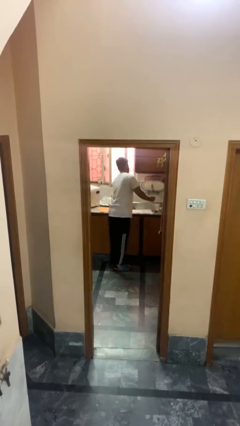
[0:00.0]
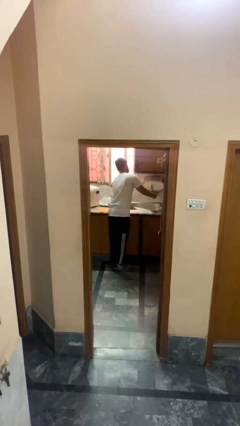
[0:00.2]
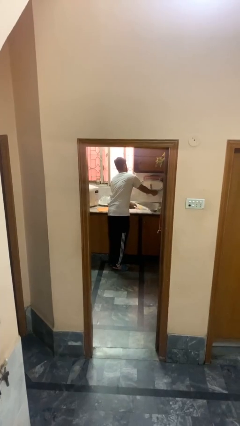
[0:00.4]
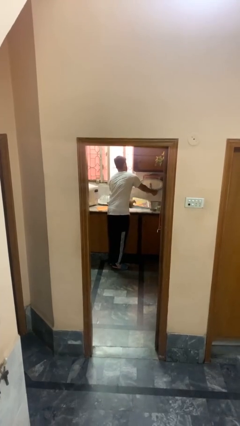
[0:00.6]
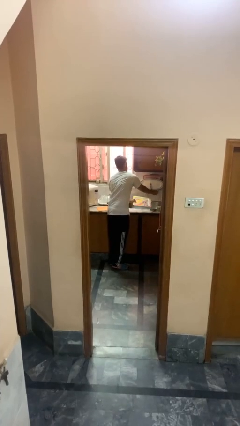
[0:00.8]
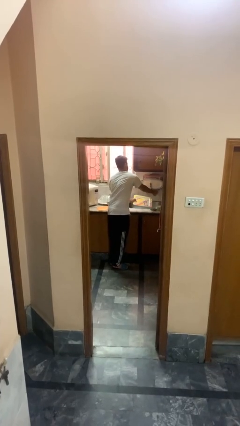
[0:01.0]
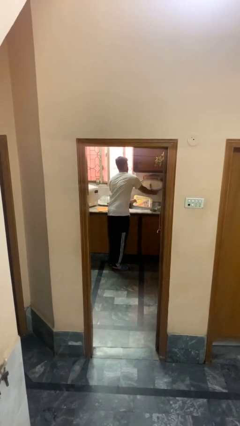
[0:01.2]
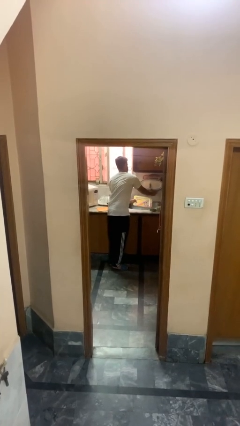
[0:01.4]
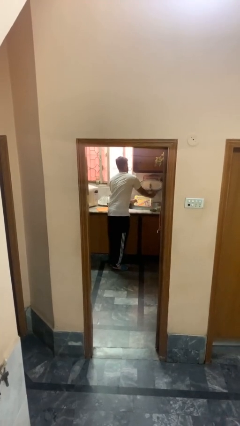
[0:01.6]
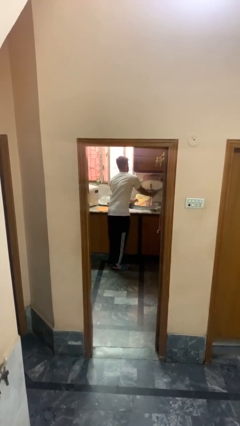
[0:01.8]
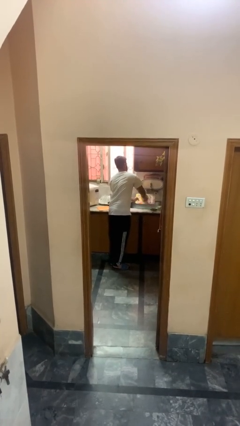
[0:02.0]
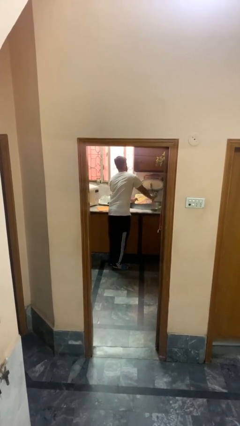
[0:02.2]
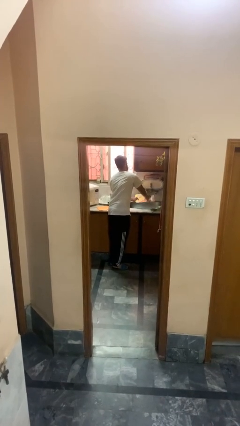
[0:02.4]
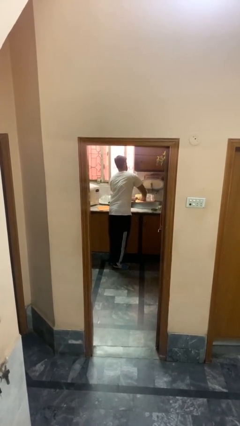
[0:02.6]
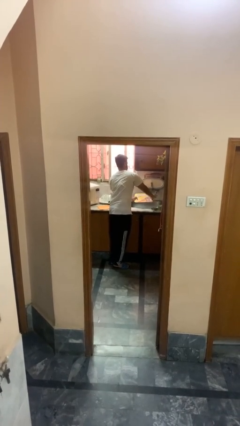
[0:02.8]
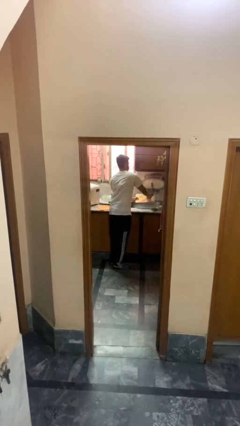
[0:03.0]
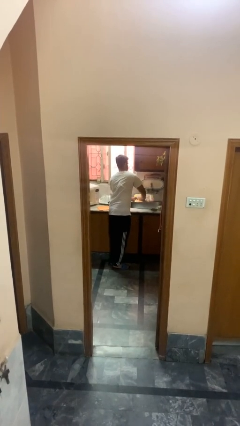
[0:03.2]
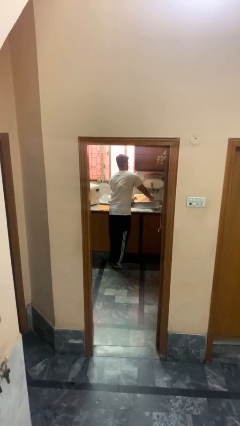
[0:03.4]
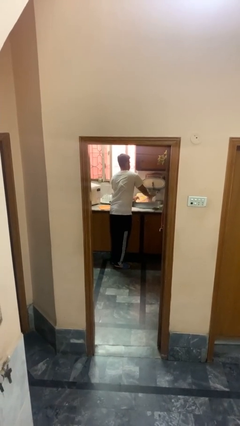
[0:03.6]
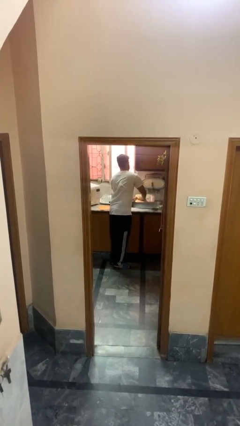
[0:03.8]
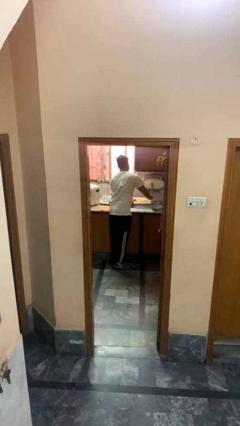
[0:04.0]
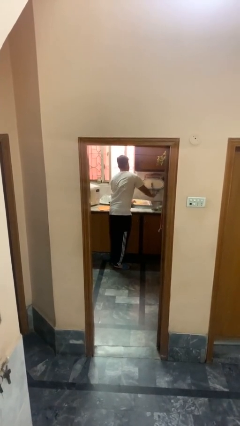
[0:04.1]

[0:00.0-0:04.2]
person washes dish

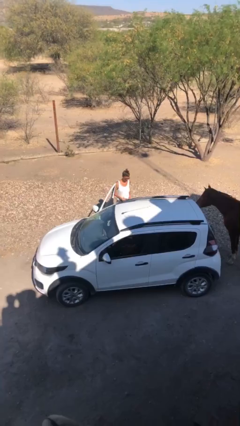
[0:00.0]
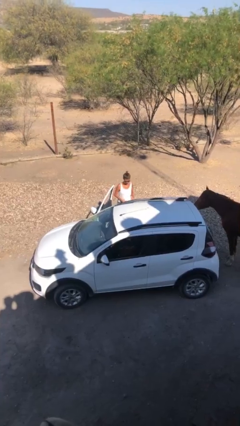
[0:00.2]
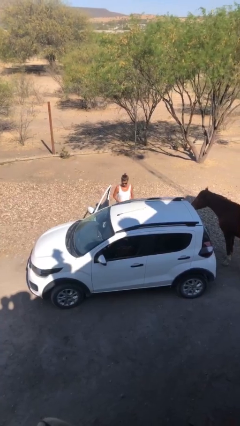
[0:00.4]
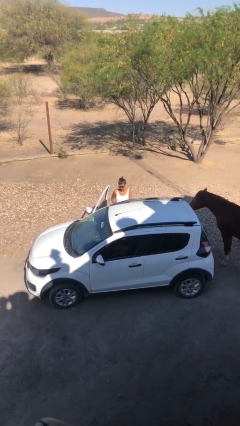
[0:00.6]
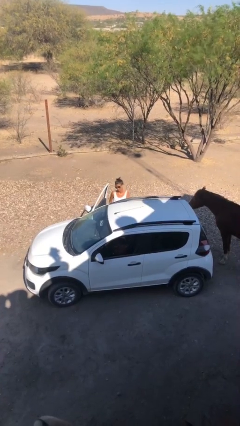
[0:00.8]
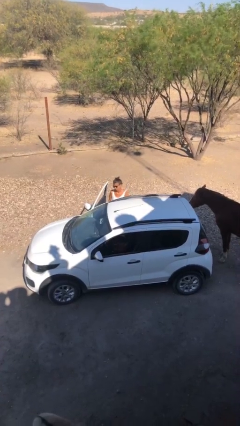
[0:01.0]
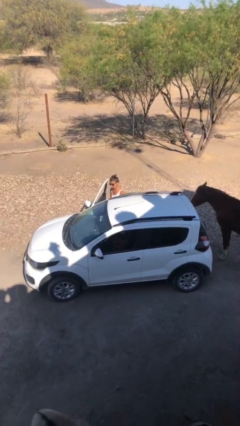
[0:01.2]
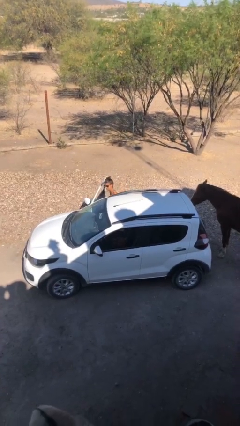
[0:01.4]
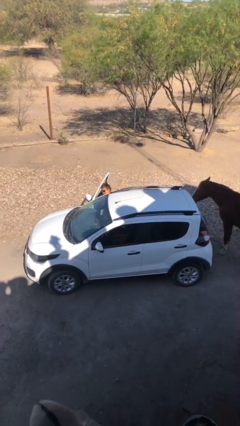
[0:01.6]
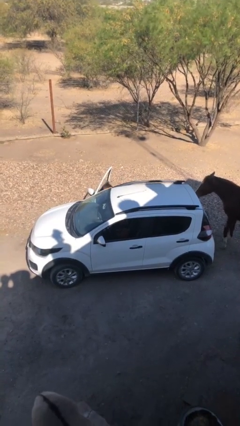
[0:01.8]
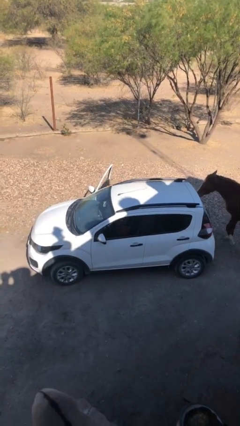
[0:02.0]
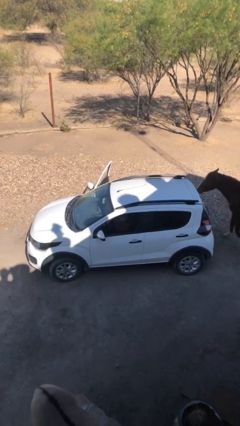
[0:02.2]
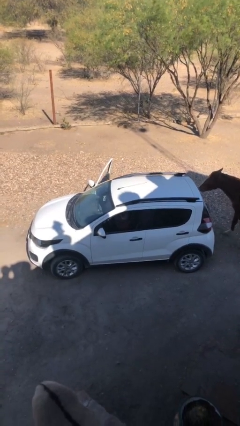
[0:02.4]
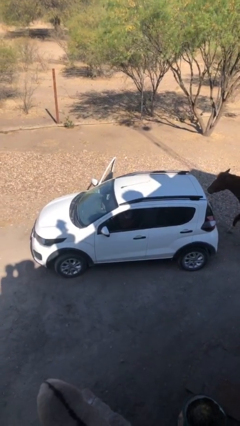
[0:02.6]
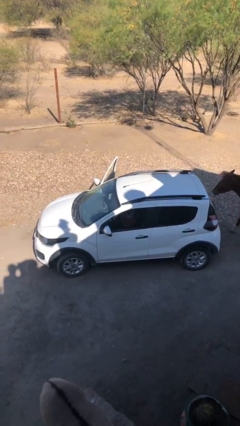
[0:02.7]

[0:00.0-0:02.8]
person enters car

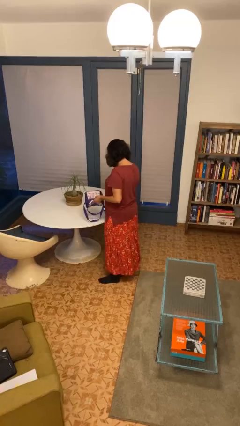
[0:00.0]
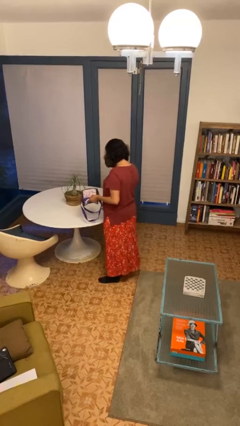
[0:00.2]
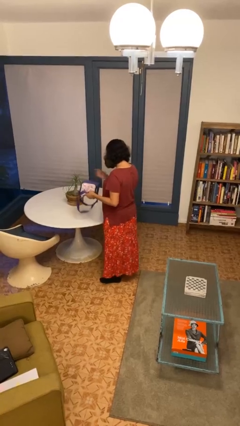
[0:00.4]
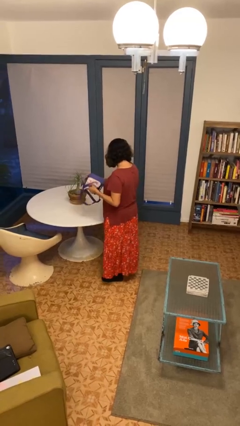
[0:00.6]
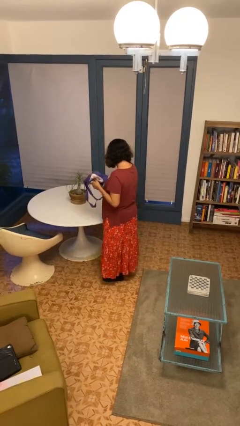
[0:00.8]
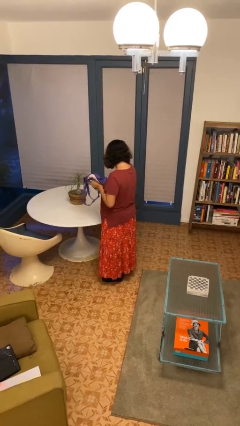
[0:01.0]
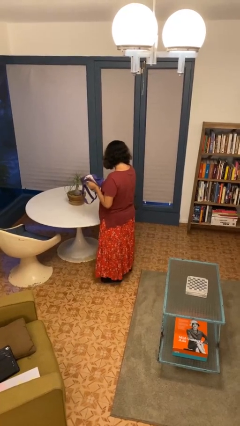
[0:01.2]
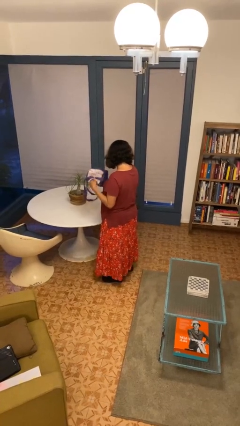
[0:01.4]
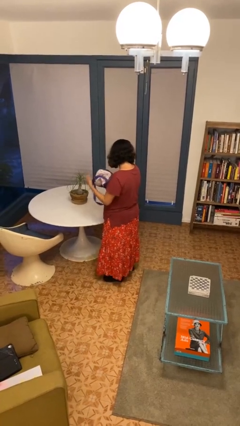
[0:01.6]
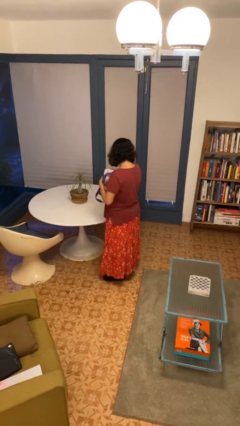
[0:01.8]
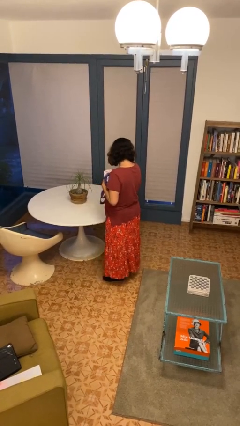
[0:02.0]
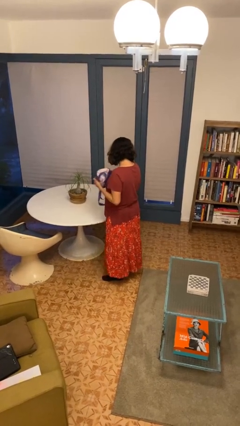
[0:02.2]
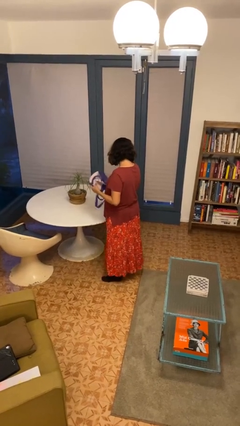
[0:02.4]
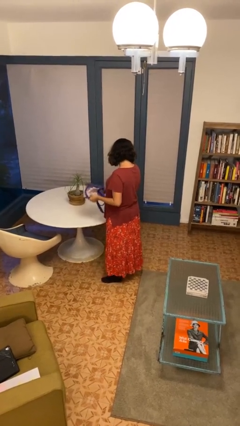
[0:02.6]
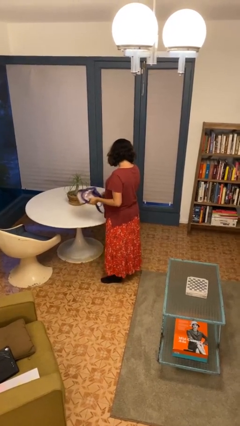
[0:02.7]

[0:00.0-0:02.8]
person squeezes object

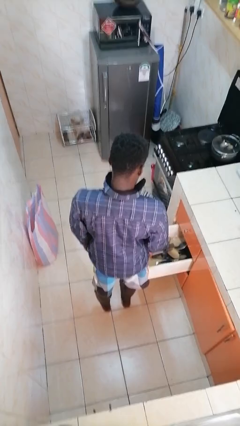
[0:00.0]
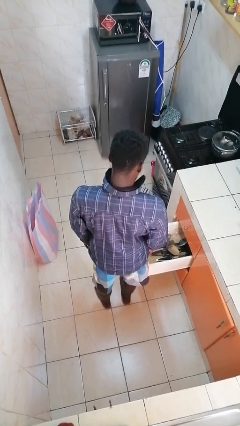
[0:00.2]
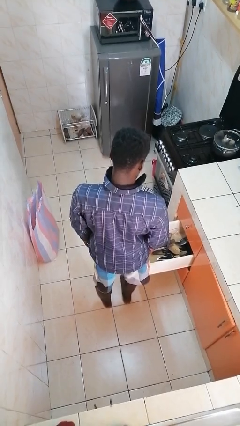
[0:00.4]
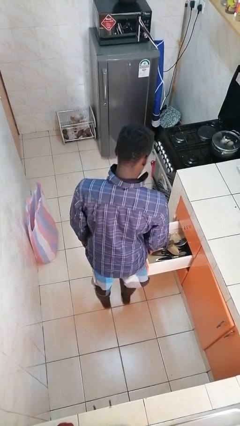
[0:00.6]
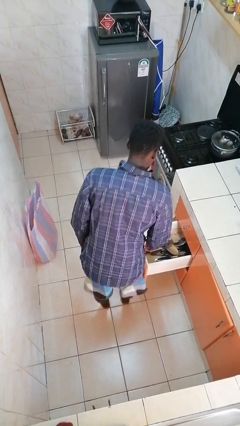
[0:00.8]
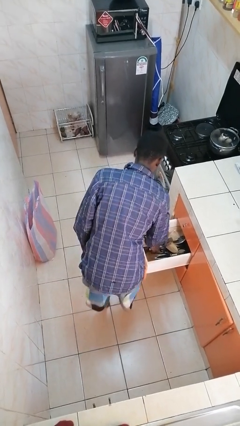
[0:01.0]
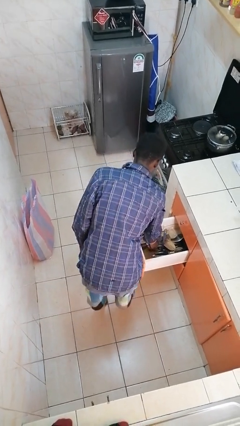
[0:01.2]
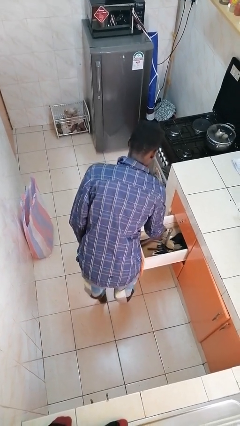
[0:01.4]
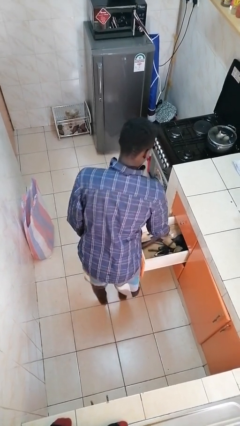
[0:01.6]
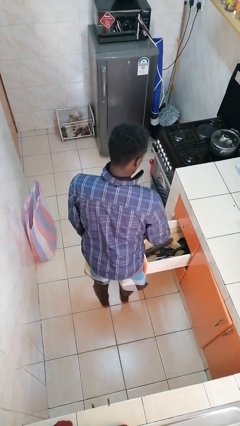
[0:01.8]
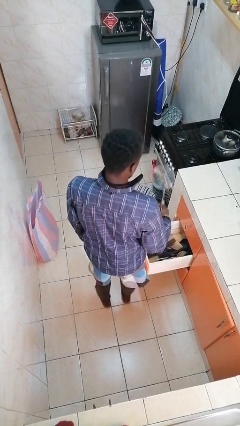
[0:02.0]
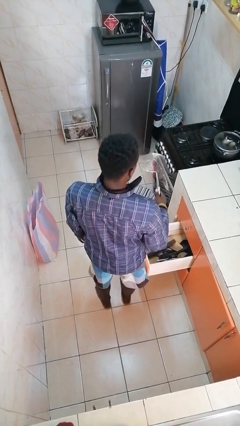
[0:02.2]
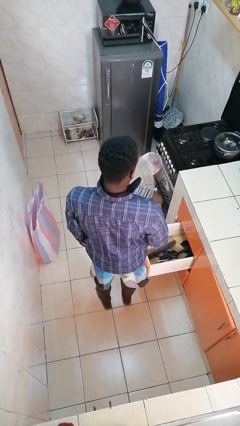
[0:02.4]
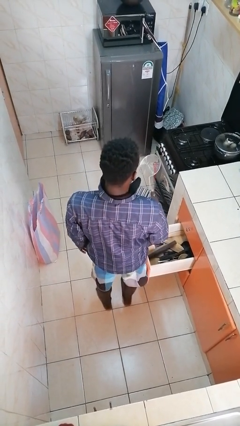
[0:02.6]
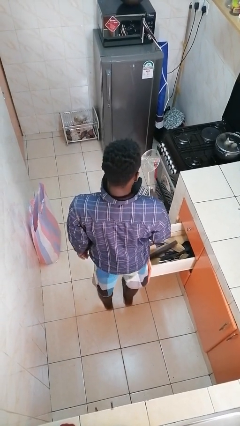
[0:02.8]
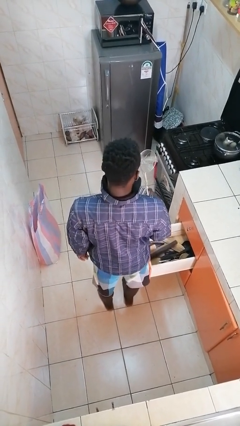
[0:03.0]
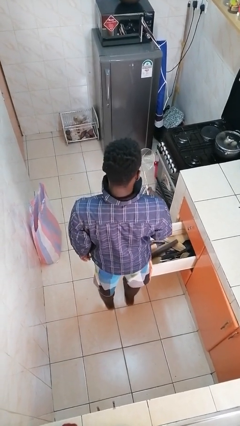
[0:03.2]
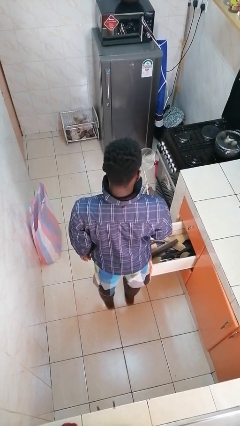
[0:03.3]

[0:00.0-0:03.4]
person takes object from kitchen drawer

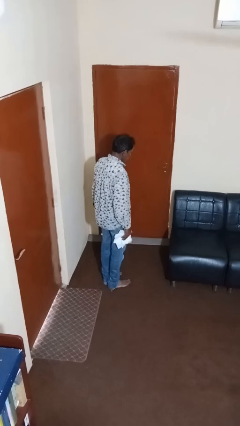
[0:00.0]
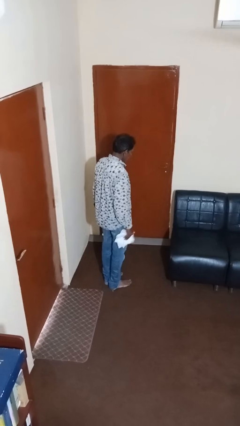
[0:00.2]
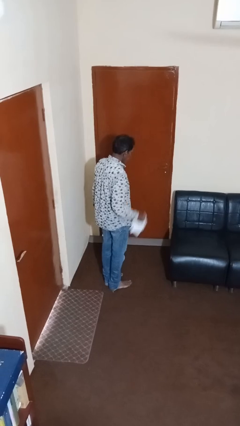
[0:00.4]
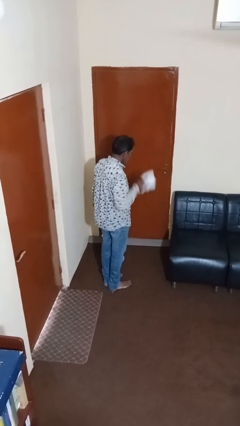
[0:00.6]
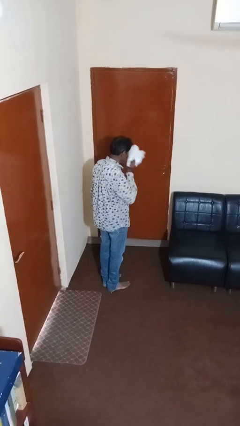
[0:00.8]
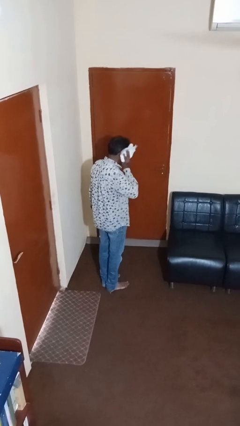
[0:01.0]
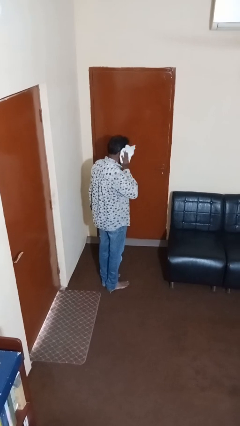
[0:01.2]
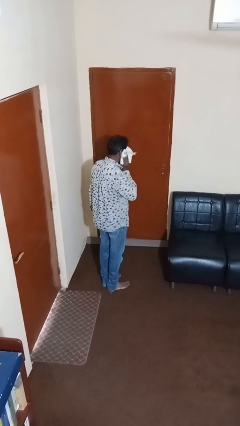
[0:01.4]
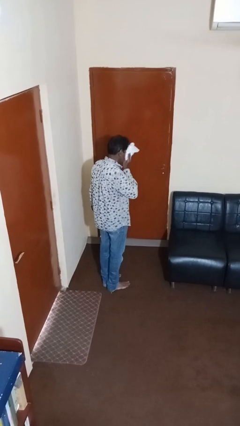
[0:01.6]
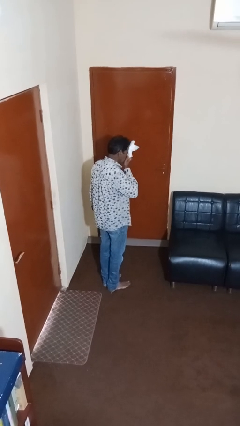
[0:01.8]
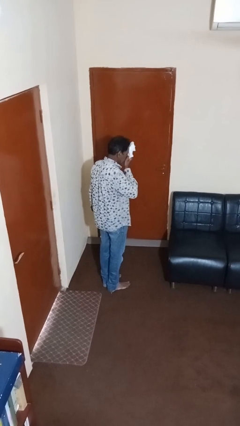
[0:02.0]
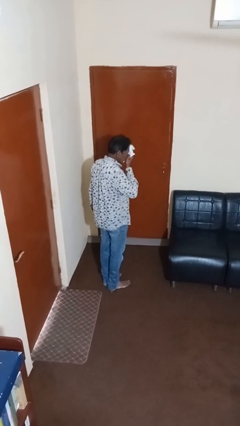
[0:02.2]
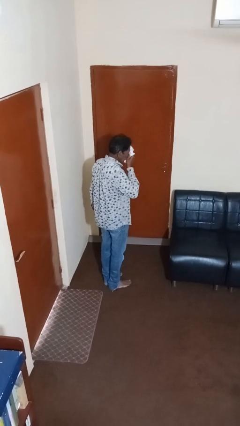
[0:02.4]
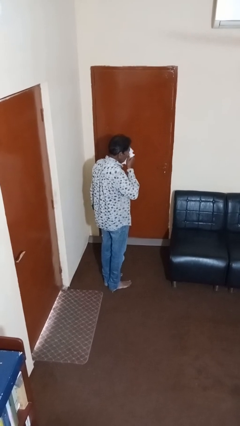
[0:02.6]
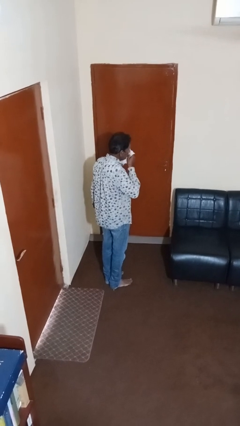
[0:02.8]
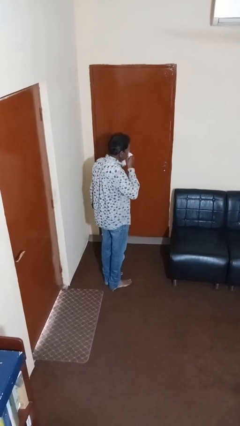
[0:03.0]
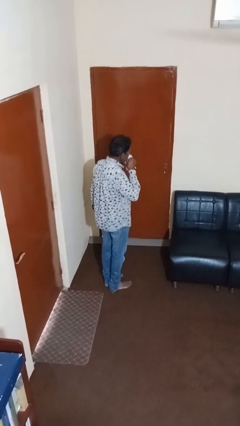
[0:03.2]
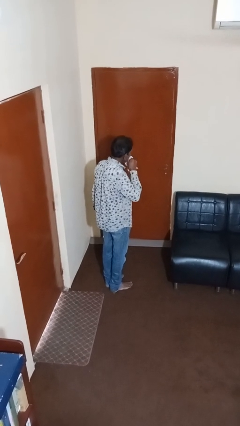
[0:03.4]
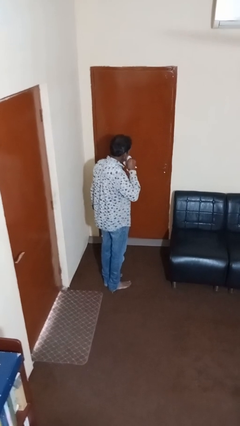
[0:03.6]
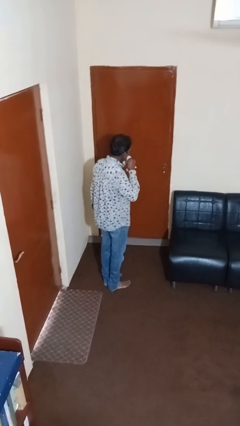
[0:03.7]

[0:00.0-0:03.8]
person wipes mouth with napkin

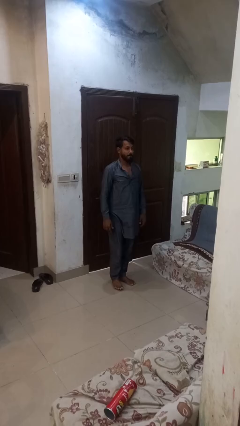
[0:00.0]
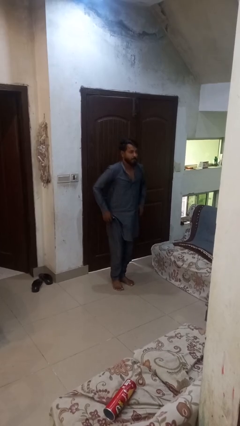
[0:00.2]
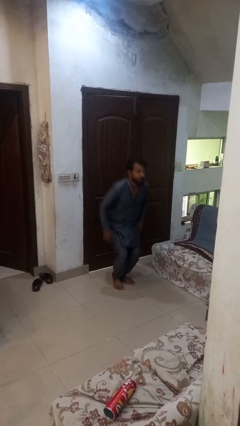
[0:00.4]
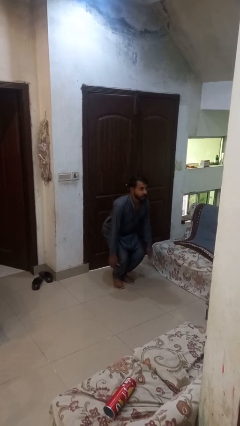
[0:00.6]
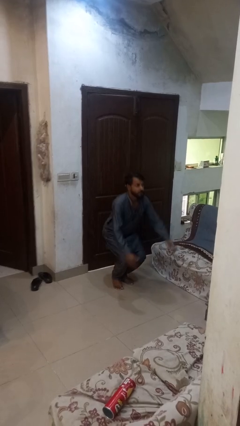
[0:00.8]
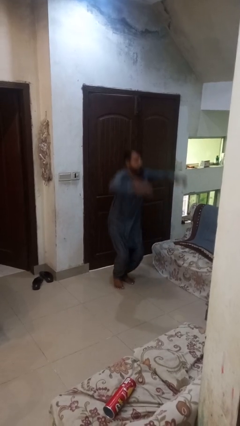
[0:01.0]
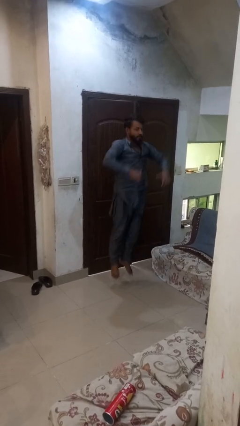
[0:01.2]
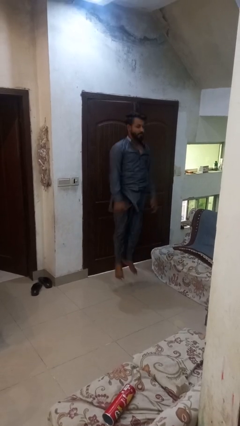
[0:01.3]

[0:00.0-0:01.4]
person jumps
